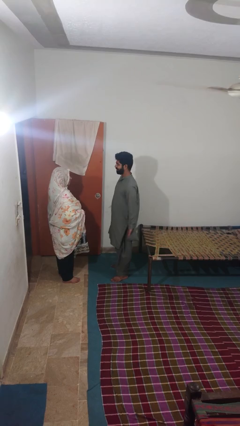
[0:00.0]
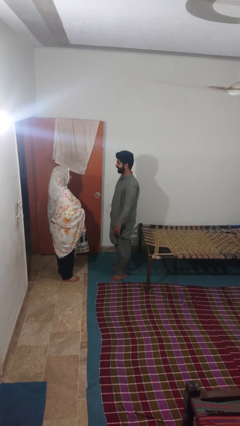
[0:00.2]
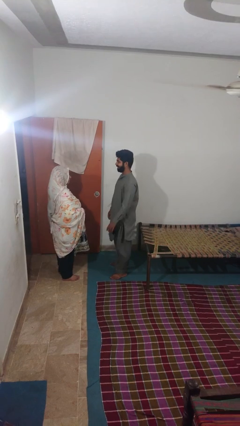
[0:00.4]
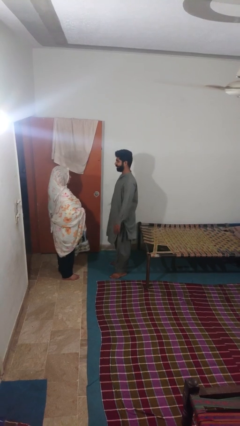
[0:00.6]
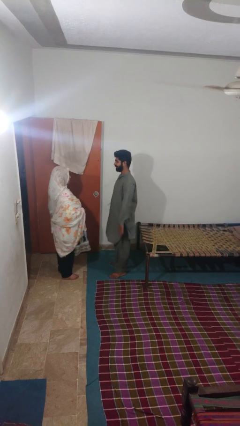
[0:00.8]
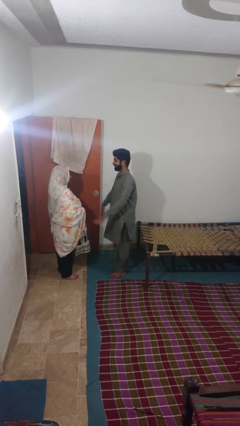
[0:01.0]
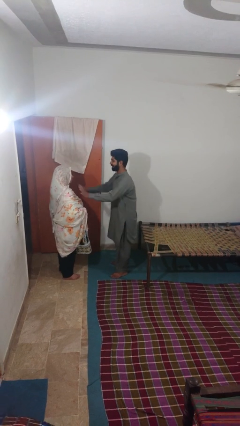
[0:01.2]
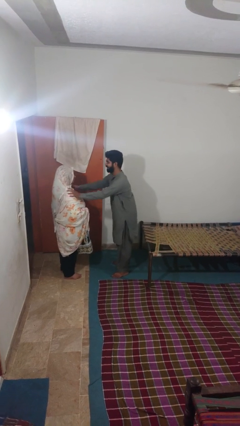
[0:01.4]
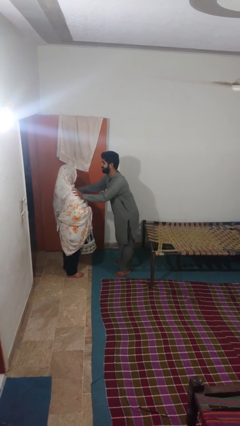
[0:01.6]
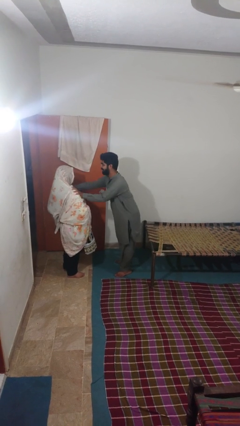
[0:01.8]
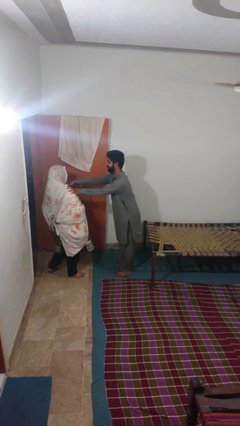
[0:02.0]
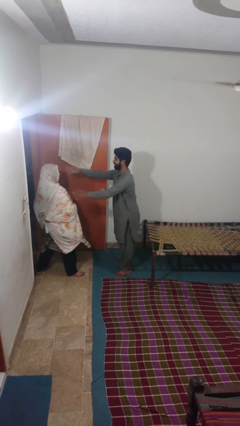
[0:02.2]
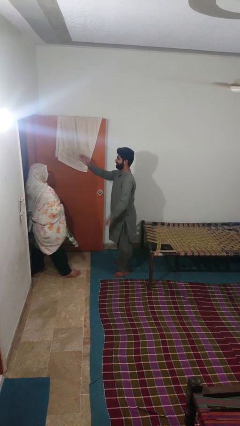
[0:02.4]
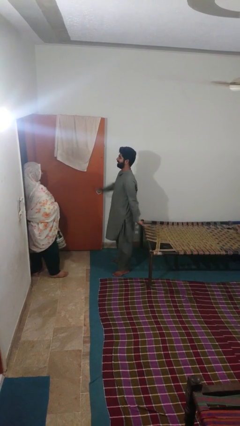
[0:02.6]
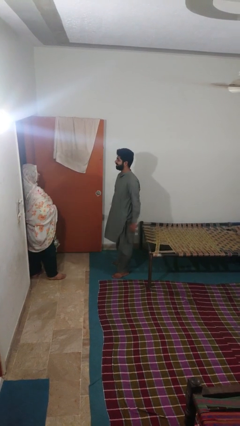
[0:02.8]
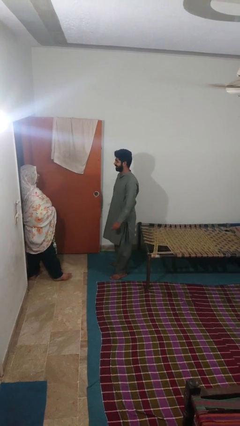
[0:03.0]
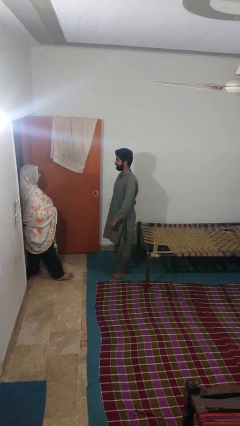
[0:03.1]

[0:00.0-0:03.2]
person shoves person

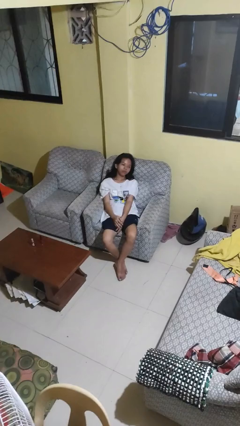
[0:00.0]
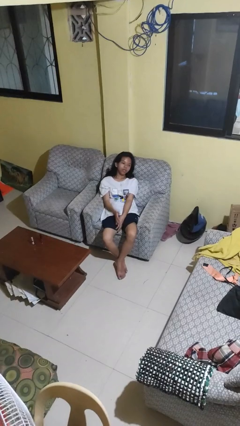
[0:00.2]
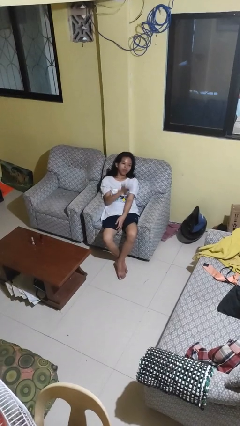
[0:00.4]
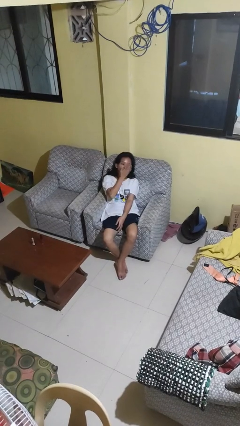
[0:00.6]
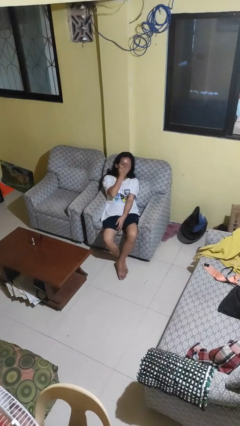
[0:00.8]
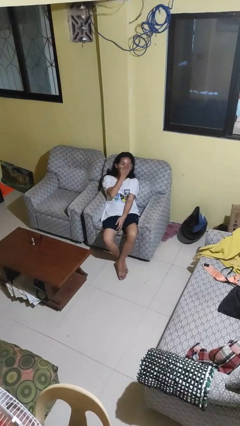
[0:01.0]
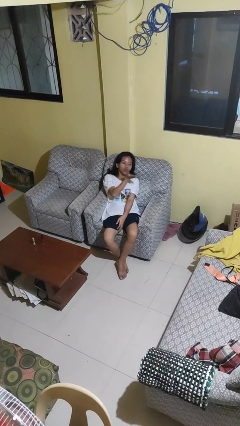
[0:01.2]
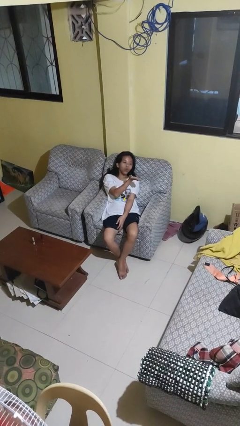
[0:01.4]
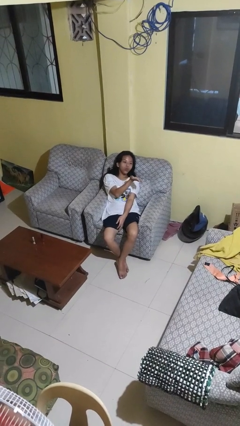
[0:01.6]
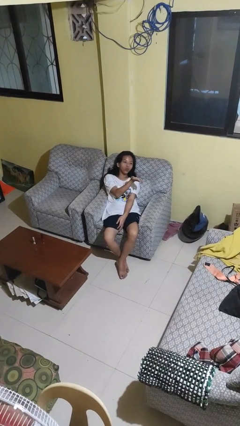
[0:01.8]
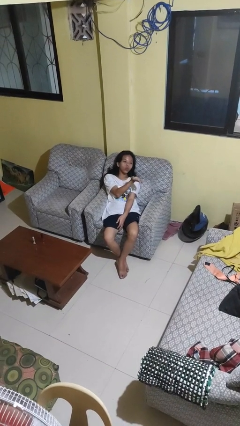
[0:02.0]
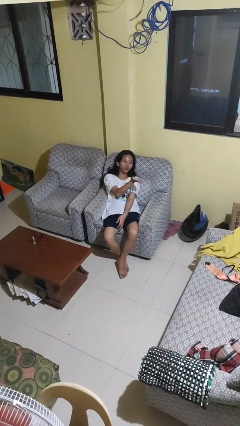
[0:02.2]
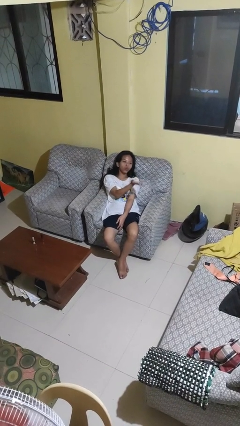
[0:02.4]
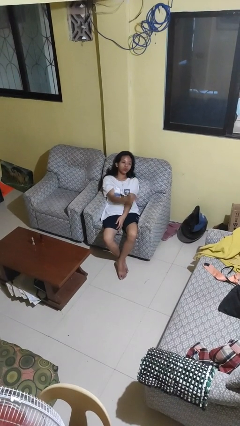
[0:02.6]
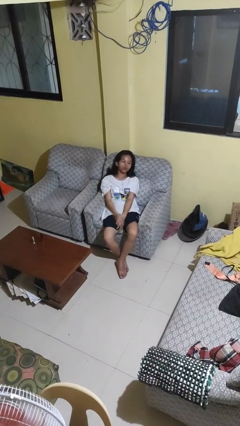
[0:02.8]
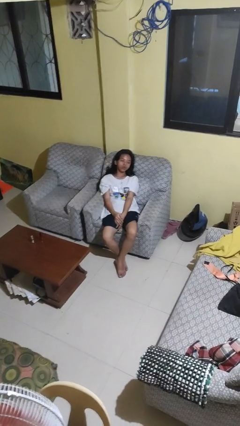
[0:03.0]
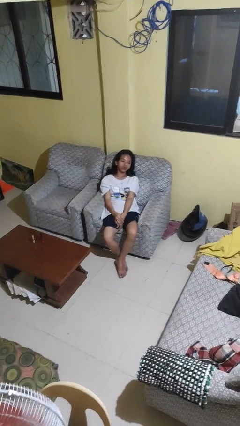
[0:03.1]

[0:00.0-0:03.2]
person gestures blow kiss

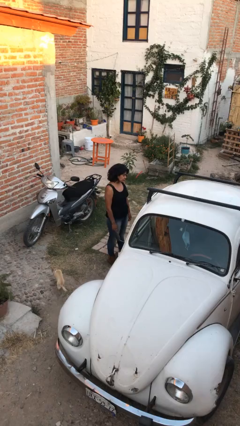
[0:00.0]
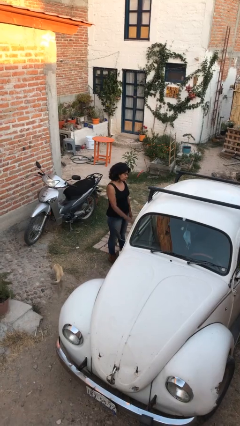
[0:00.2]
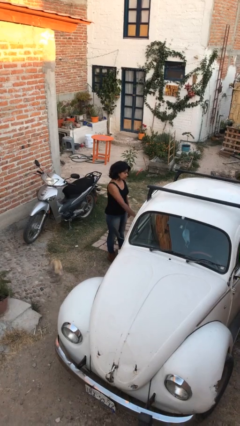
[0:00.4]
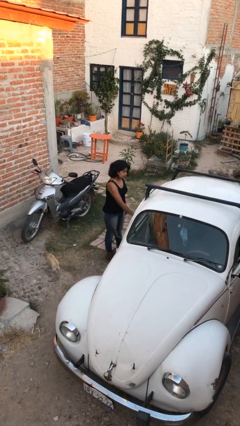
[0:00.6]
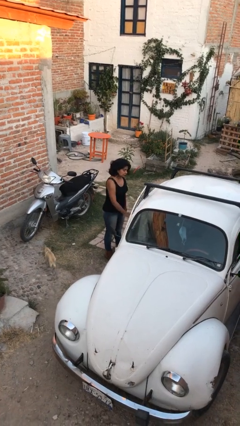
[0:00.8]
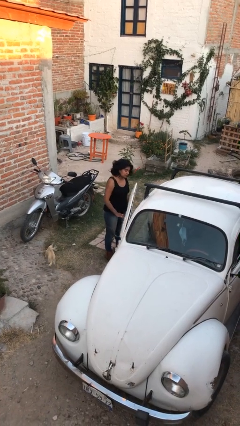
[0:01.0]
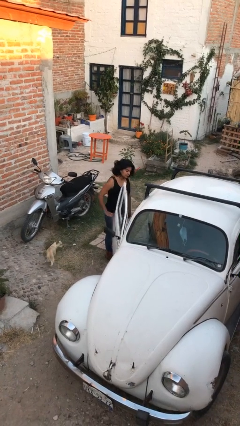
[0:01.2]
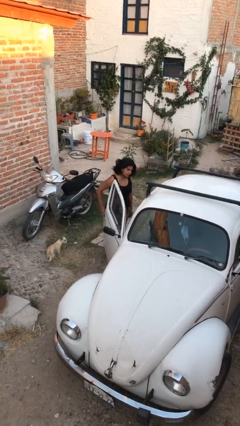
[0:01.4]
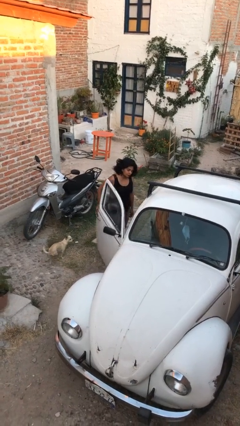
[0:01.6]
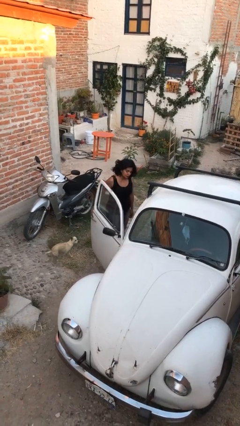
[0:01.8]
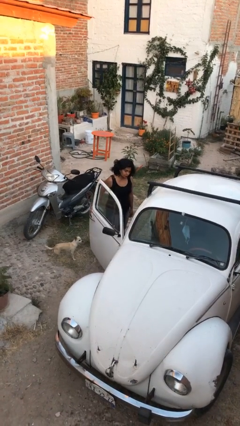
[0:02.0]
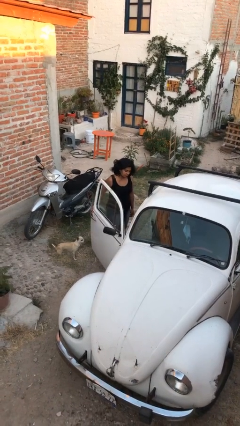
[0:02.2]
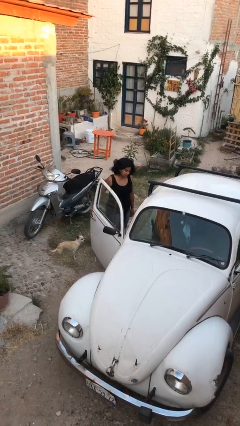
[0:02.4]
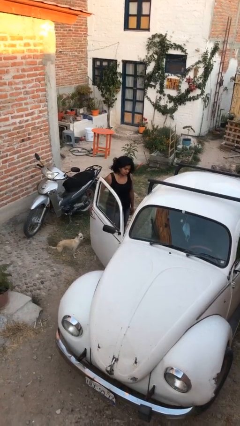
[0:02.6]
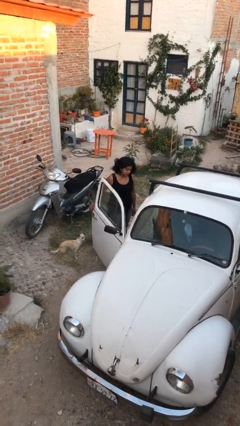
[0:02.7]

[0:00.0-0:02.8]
person opens car door

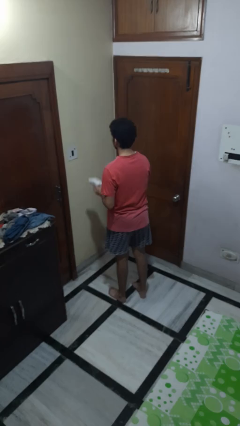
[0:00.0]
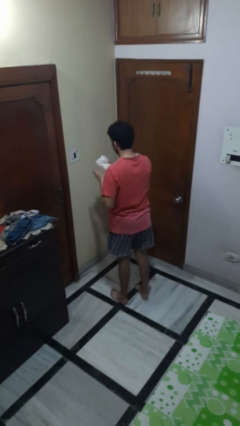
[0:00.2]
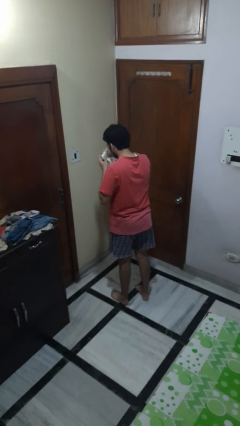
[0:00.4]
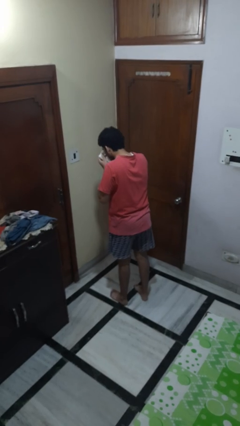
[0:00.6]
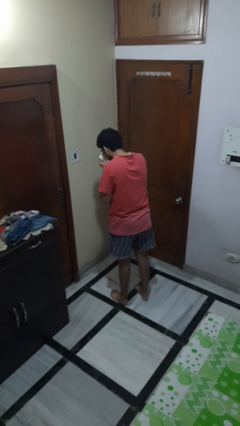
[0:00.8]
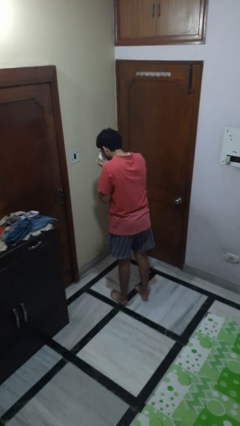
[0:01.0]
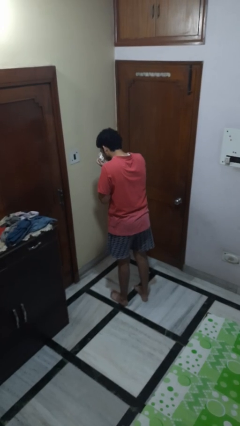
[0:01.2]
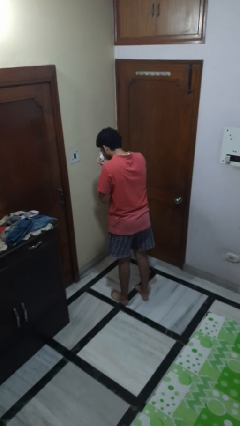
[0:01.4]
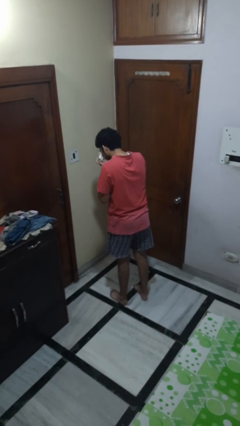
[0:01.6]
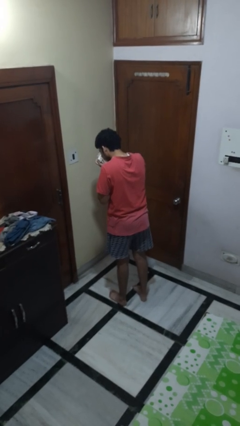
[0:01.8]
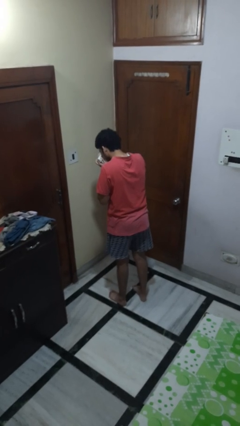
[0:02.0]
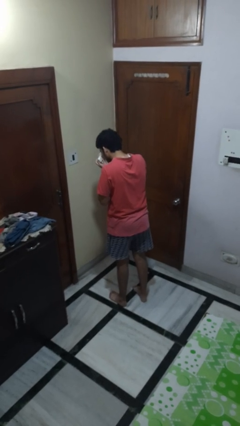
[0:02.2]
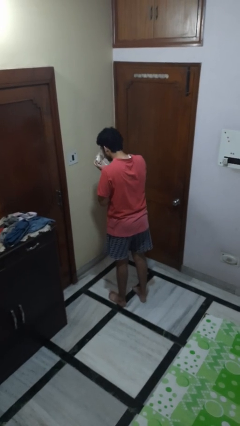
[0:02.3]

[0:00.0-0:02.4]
person blows nose

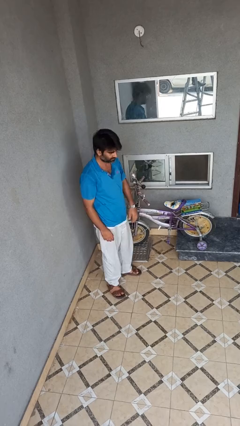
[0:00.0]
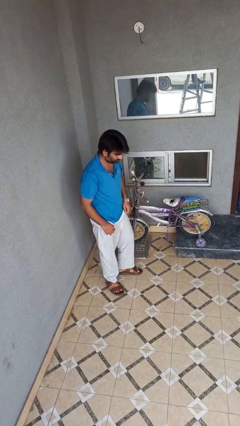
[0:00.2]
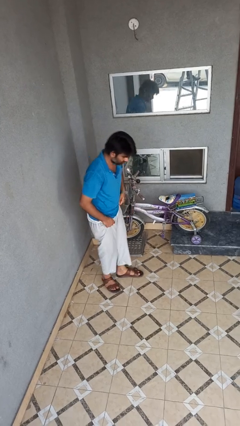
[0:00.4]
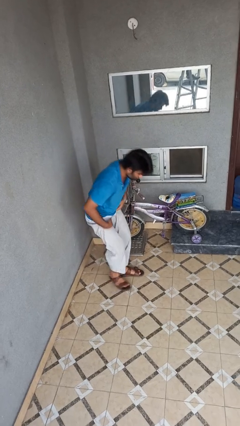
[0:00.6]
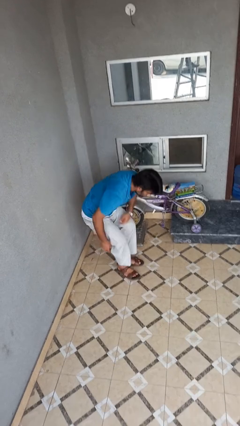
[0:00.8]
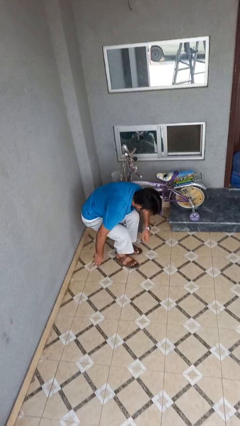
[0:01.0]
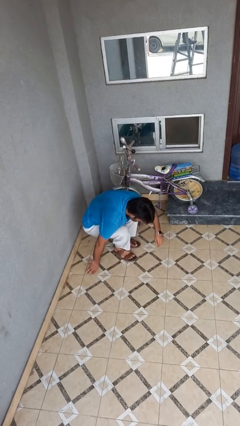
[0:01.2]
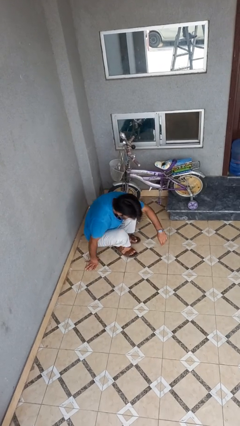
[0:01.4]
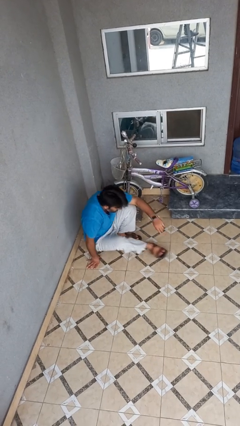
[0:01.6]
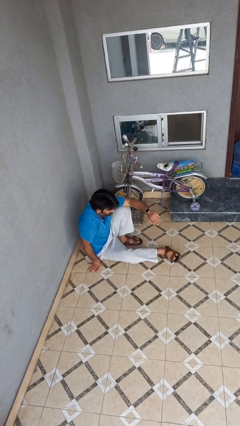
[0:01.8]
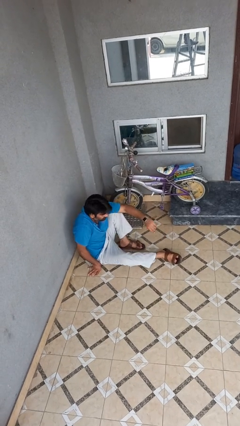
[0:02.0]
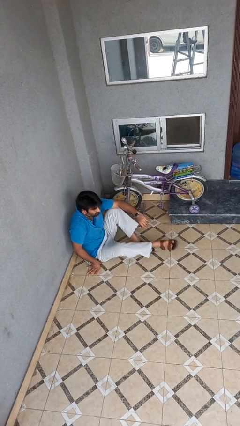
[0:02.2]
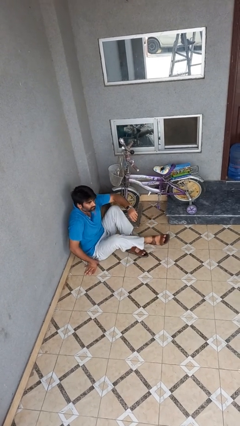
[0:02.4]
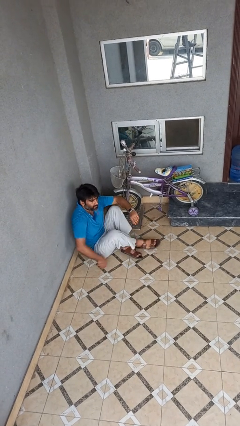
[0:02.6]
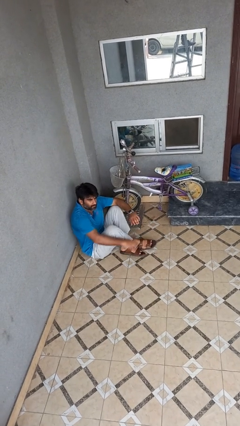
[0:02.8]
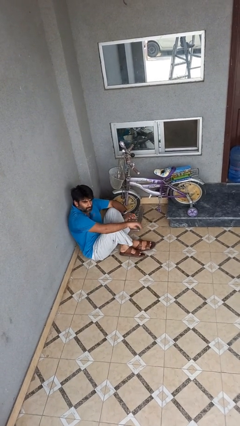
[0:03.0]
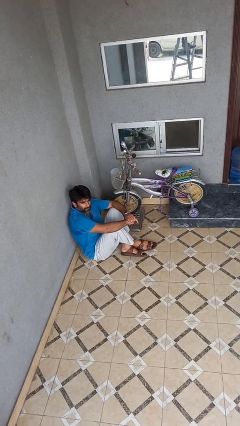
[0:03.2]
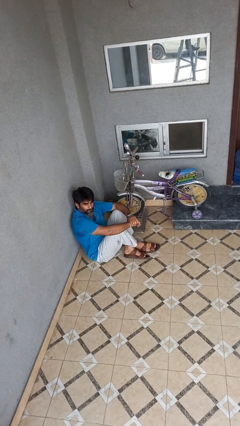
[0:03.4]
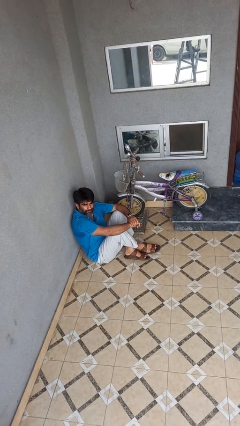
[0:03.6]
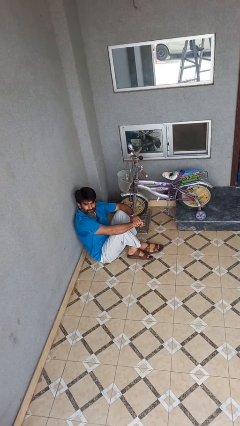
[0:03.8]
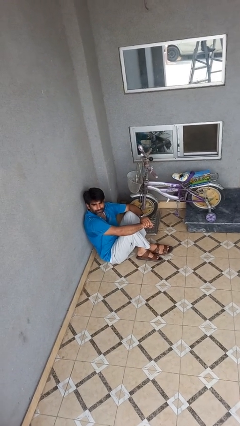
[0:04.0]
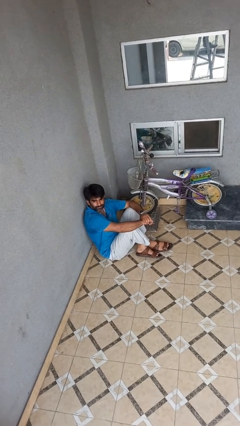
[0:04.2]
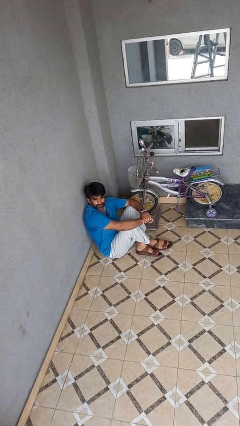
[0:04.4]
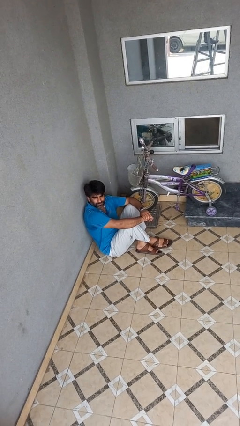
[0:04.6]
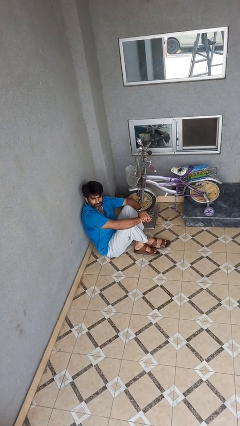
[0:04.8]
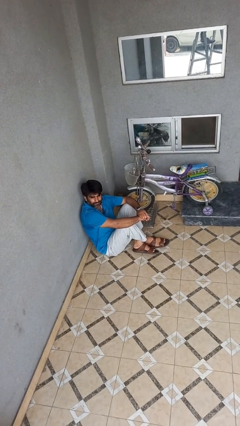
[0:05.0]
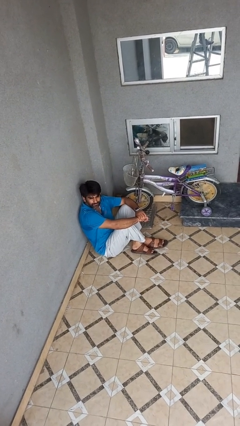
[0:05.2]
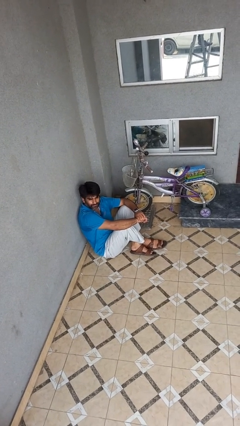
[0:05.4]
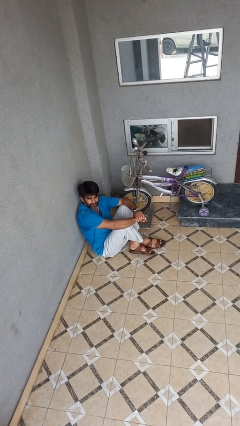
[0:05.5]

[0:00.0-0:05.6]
person sits crisscross

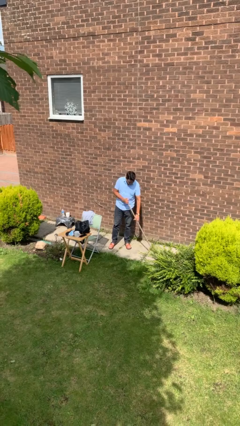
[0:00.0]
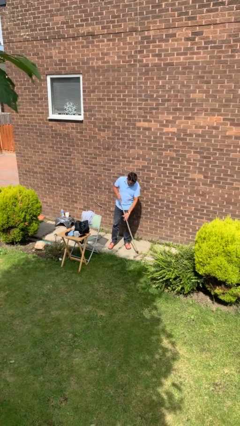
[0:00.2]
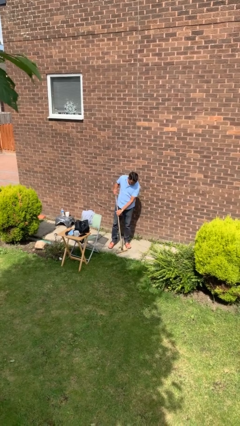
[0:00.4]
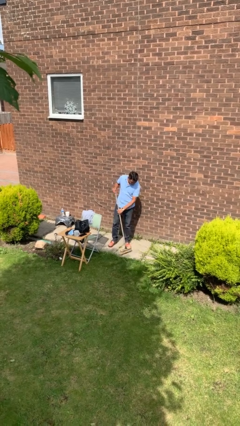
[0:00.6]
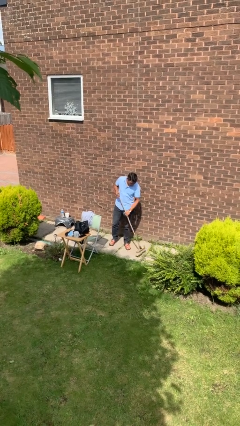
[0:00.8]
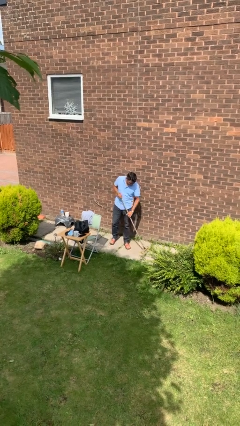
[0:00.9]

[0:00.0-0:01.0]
person sweeps floor
